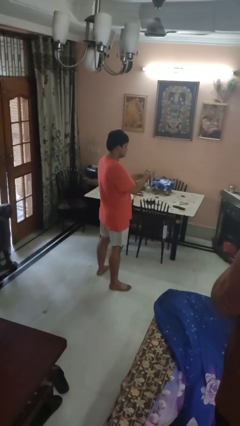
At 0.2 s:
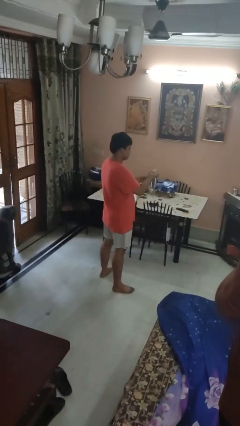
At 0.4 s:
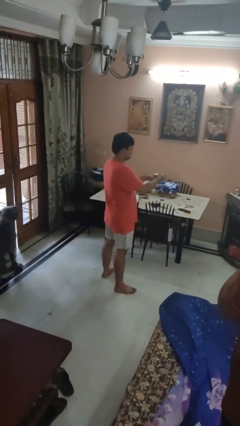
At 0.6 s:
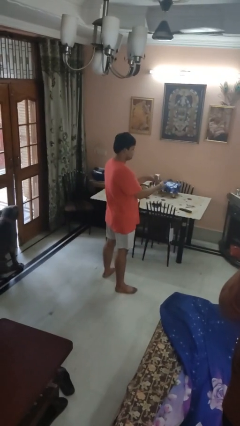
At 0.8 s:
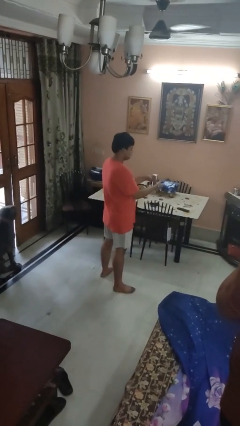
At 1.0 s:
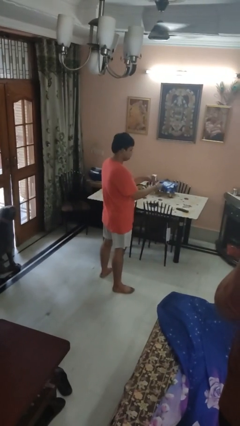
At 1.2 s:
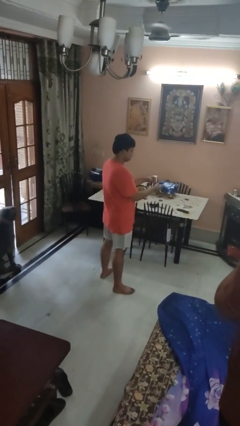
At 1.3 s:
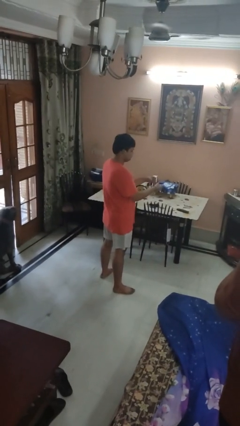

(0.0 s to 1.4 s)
person opens beverage can

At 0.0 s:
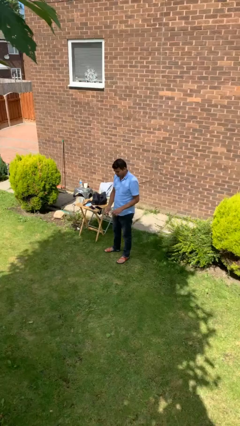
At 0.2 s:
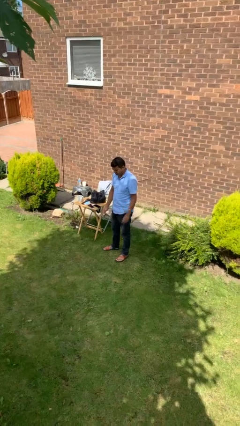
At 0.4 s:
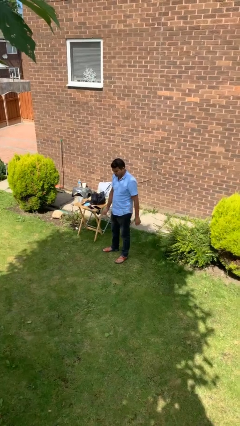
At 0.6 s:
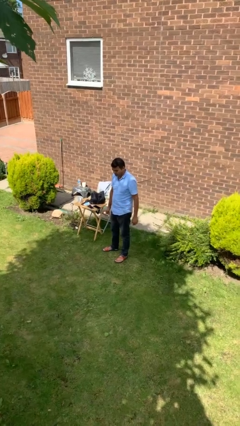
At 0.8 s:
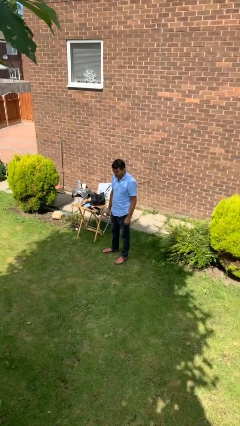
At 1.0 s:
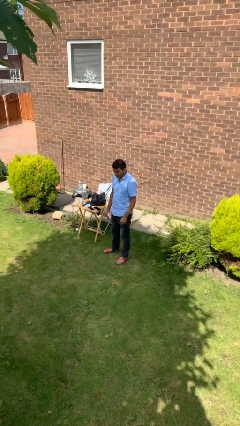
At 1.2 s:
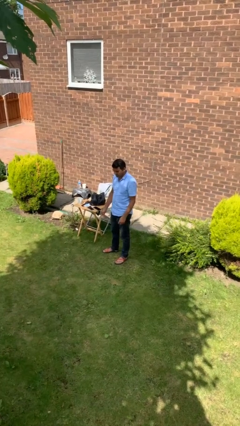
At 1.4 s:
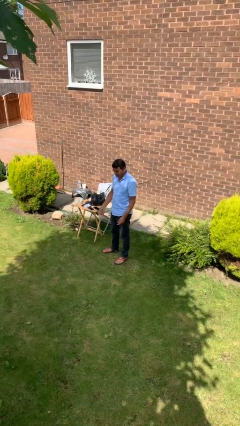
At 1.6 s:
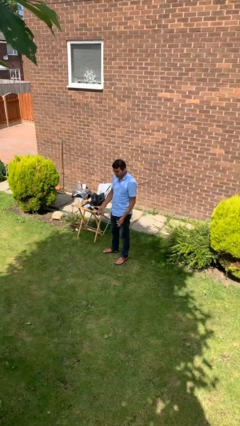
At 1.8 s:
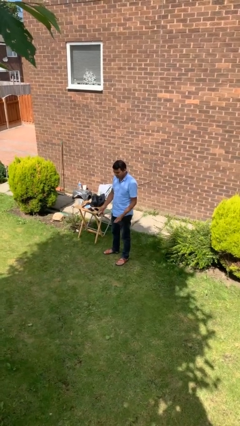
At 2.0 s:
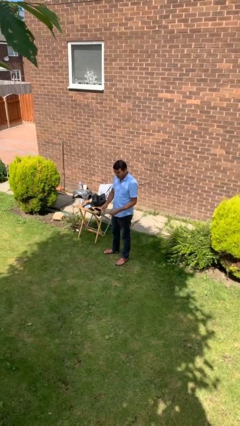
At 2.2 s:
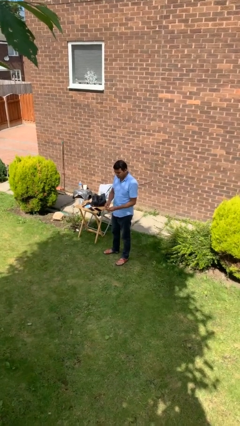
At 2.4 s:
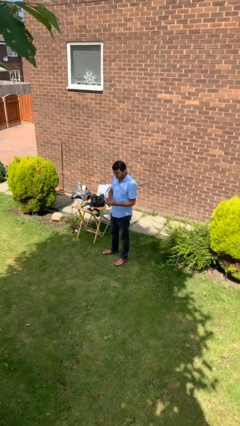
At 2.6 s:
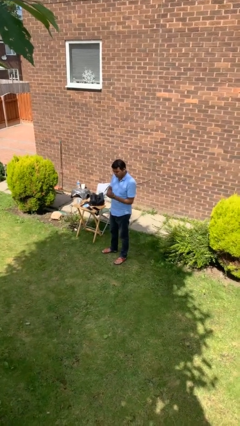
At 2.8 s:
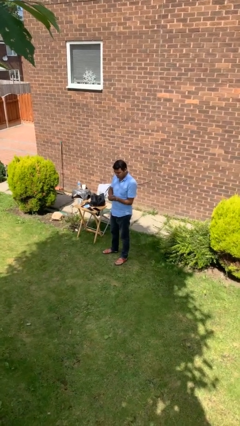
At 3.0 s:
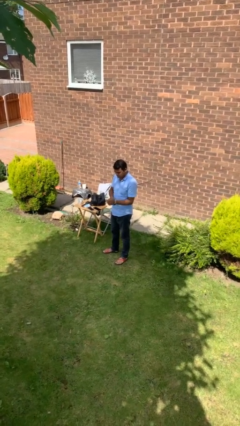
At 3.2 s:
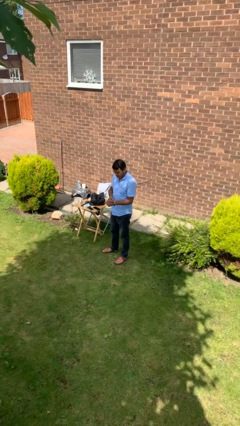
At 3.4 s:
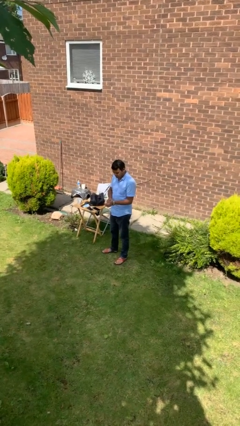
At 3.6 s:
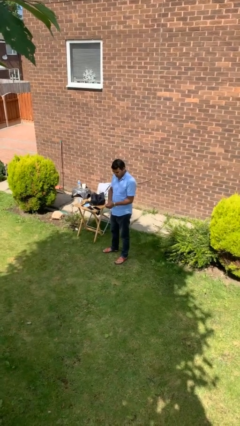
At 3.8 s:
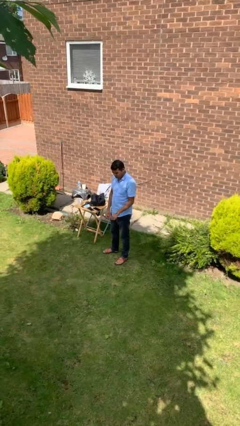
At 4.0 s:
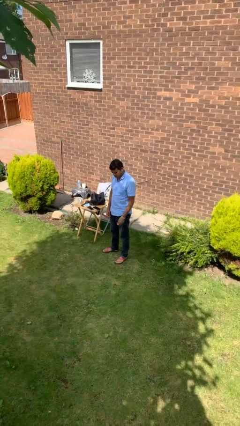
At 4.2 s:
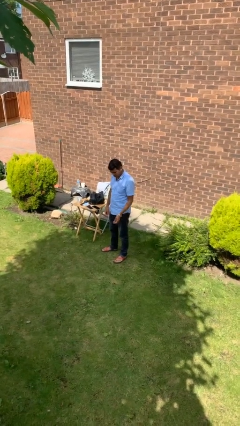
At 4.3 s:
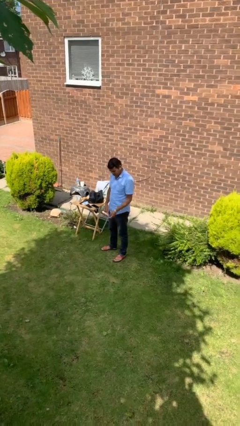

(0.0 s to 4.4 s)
person puts on wristwatch

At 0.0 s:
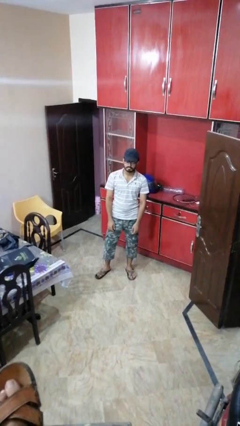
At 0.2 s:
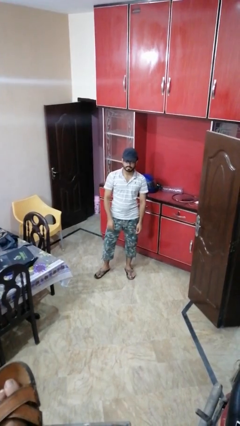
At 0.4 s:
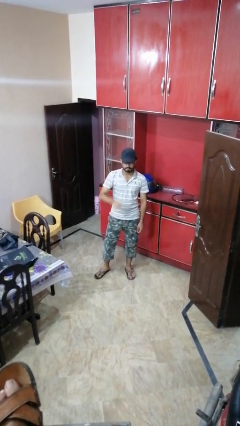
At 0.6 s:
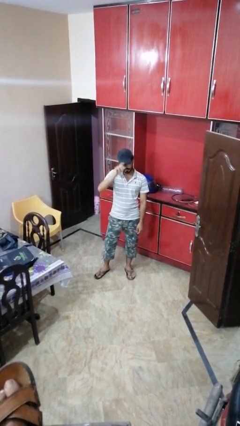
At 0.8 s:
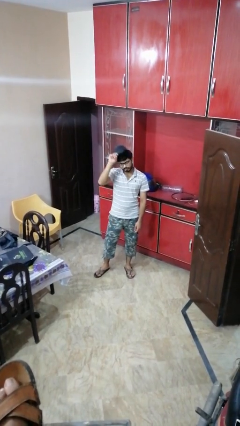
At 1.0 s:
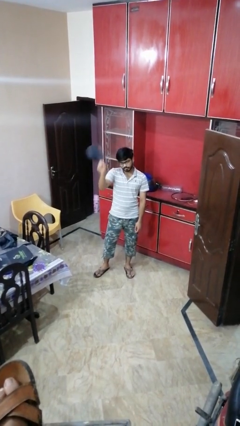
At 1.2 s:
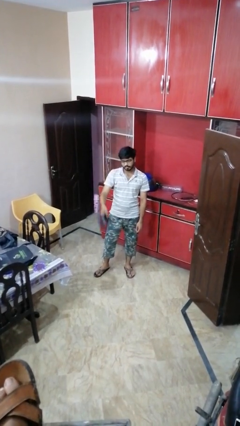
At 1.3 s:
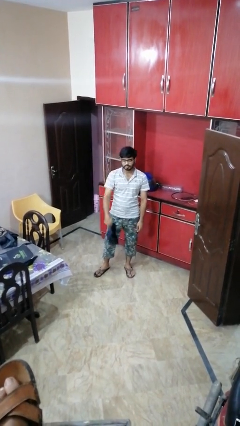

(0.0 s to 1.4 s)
person takes off hat

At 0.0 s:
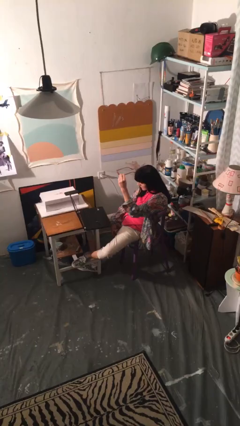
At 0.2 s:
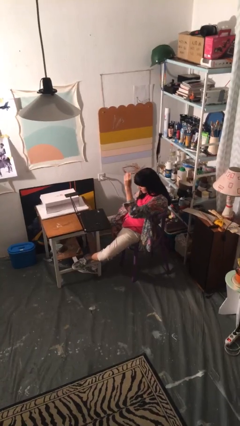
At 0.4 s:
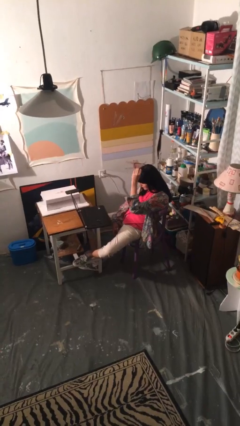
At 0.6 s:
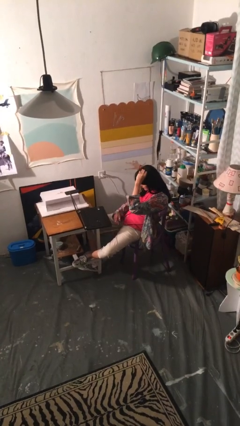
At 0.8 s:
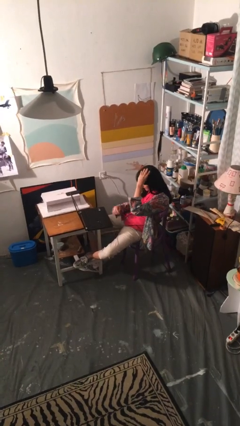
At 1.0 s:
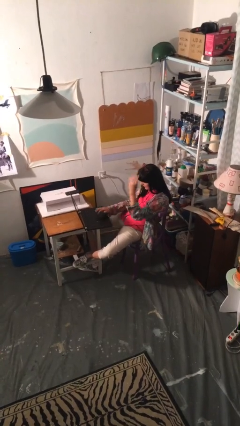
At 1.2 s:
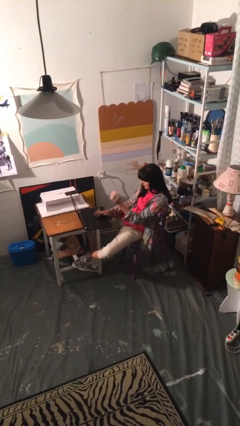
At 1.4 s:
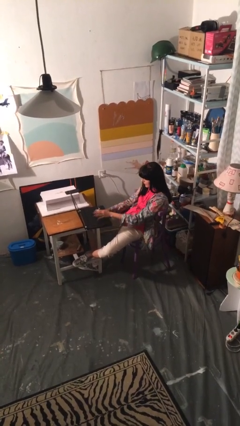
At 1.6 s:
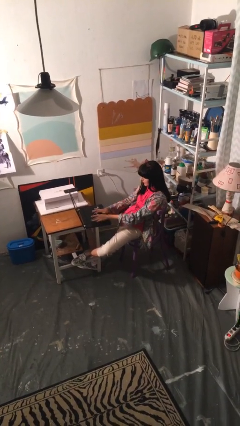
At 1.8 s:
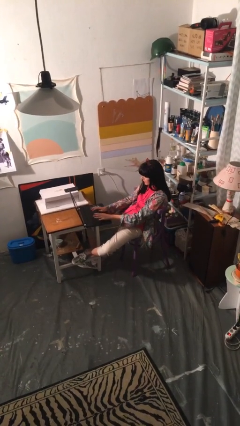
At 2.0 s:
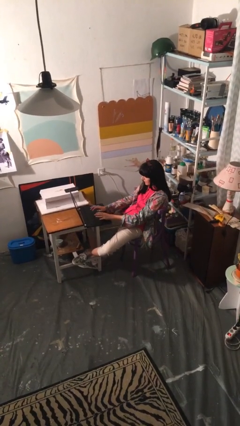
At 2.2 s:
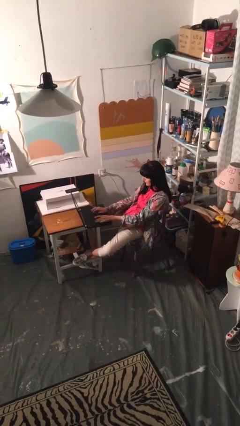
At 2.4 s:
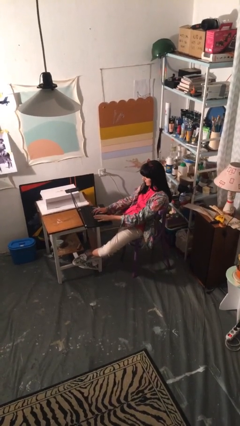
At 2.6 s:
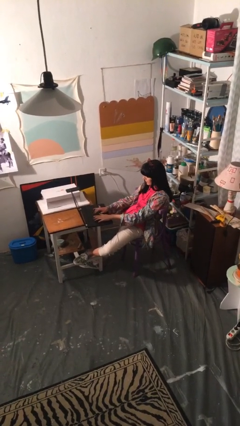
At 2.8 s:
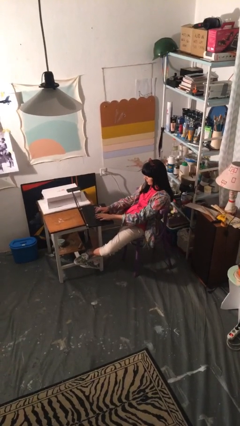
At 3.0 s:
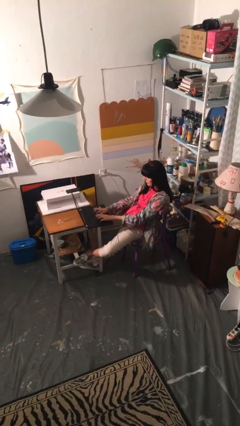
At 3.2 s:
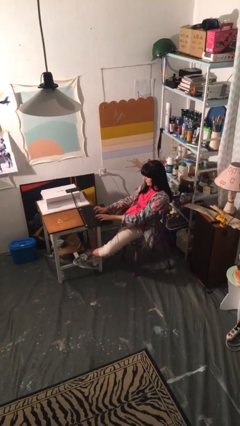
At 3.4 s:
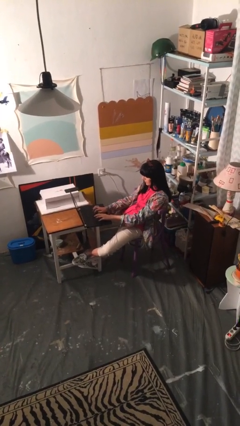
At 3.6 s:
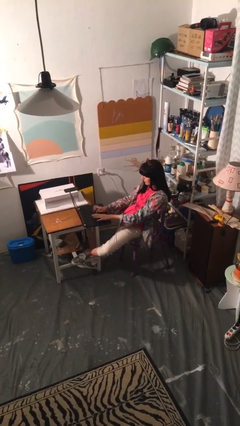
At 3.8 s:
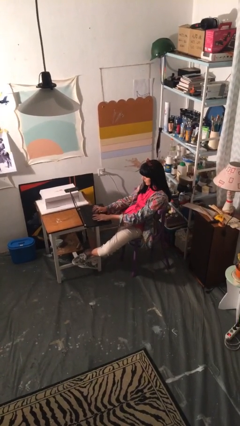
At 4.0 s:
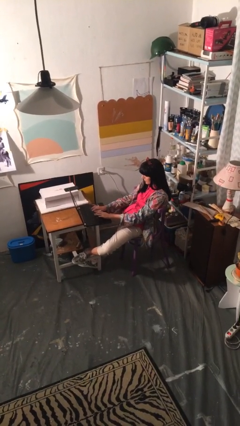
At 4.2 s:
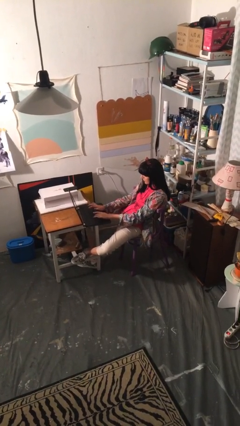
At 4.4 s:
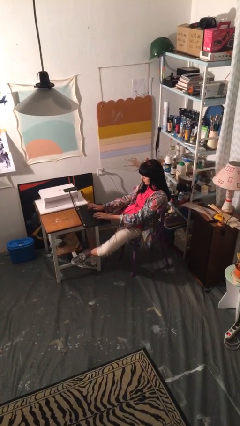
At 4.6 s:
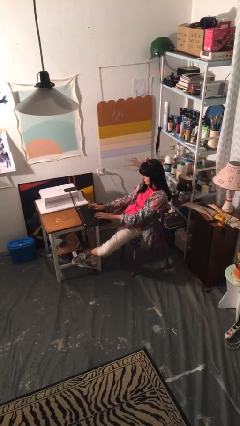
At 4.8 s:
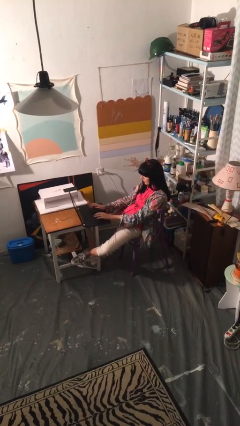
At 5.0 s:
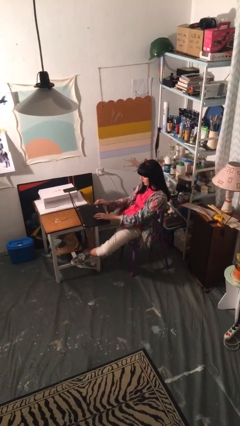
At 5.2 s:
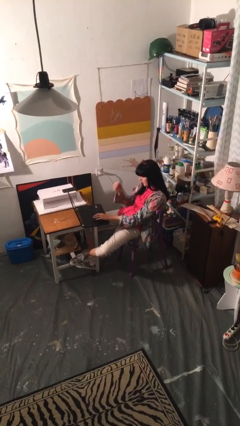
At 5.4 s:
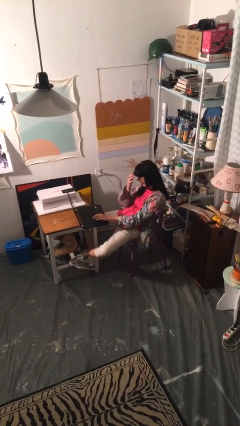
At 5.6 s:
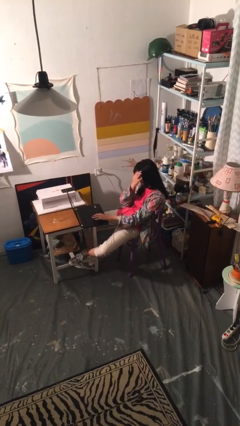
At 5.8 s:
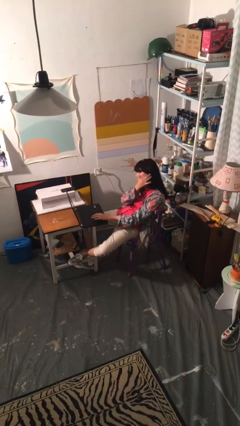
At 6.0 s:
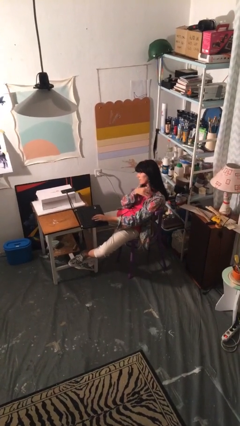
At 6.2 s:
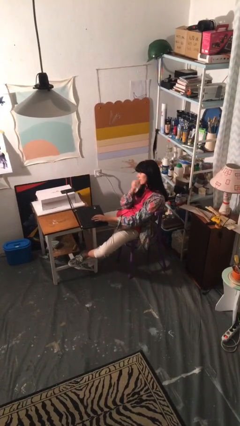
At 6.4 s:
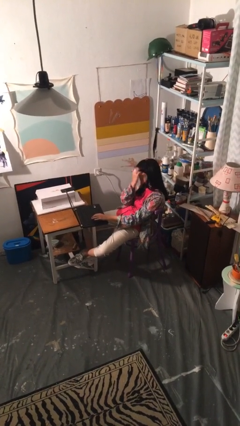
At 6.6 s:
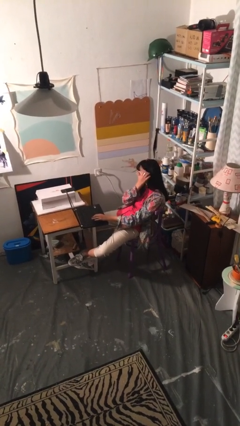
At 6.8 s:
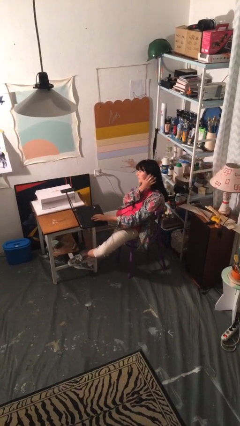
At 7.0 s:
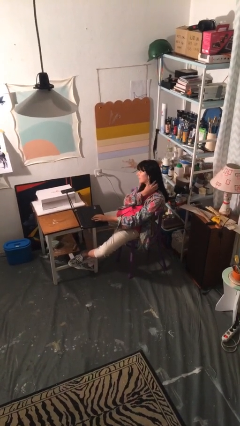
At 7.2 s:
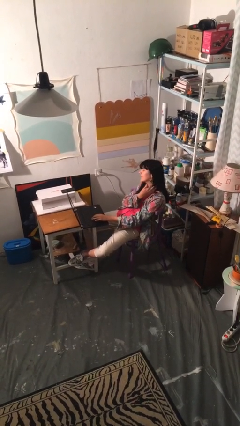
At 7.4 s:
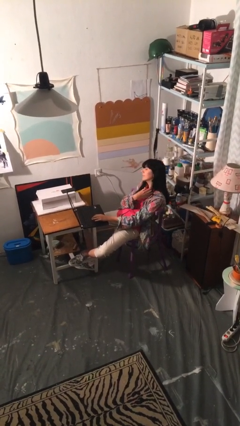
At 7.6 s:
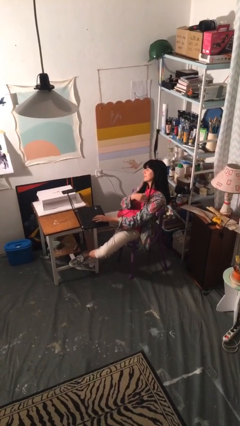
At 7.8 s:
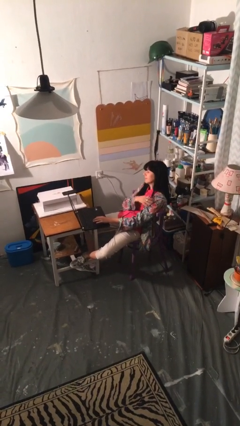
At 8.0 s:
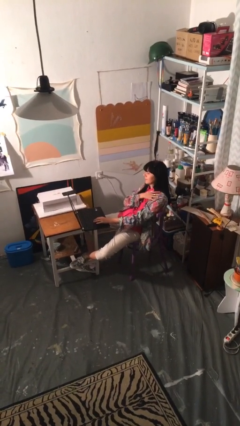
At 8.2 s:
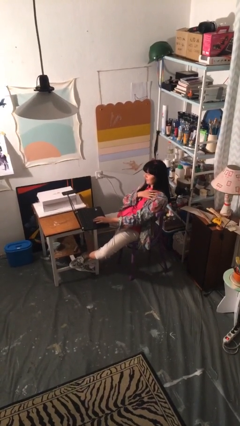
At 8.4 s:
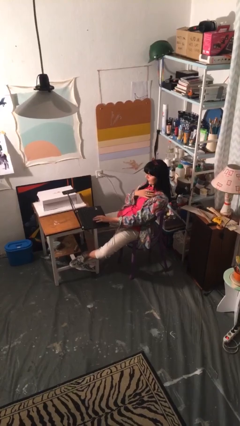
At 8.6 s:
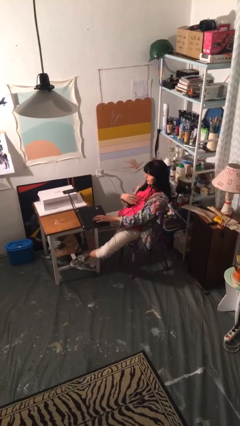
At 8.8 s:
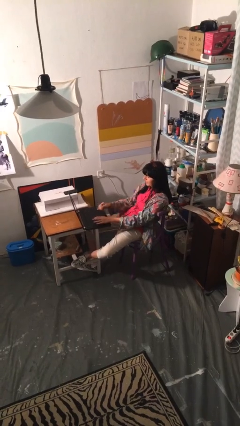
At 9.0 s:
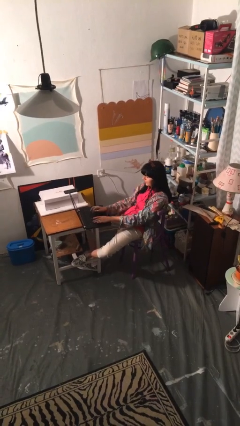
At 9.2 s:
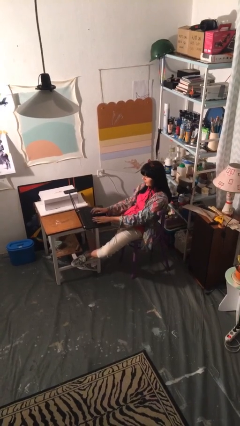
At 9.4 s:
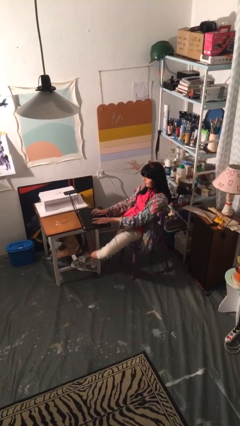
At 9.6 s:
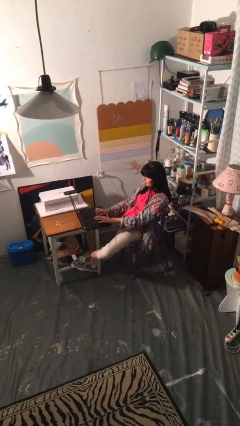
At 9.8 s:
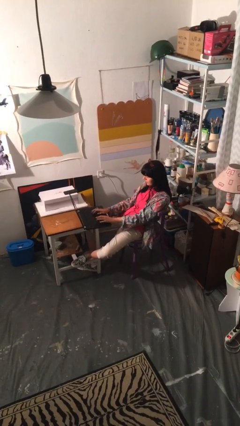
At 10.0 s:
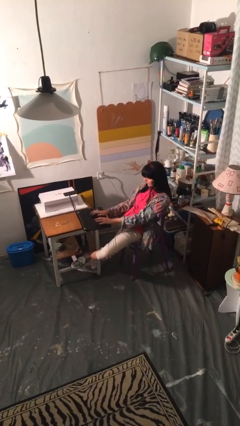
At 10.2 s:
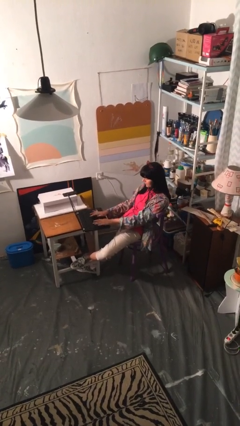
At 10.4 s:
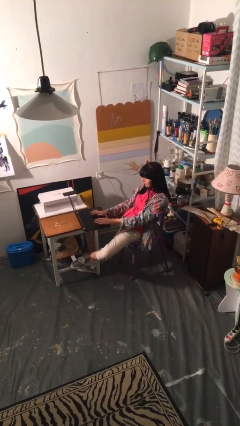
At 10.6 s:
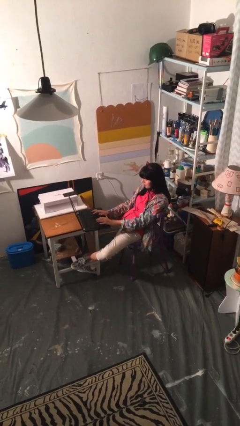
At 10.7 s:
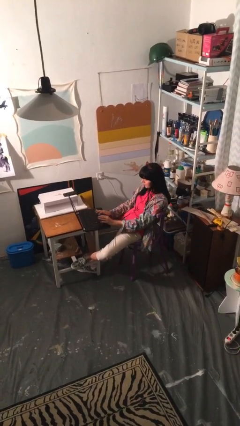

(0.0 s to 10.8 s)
person interacts with laptop
